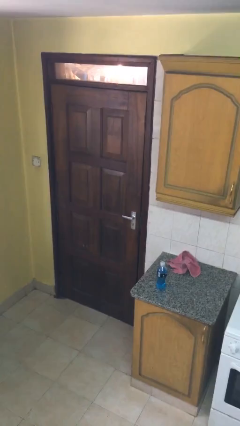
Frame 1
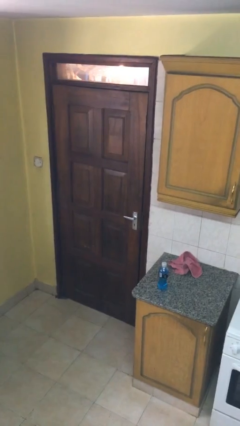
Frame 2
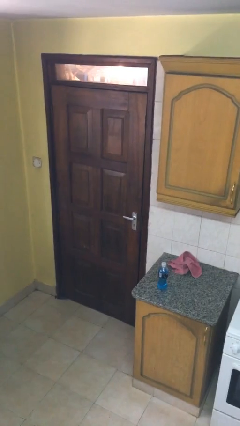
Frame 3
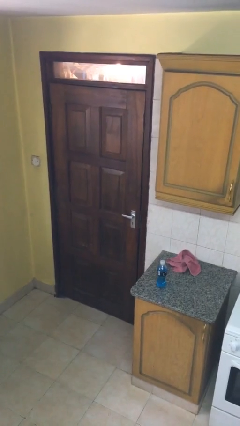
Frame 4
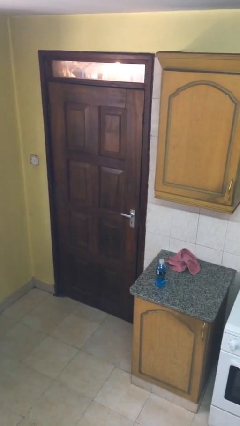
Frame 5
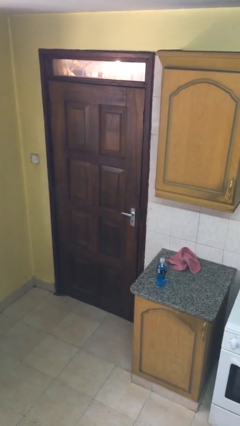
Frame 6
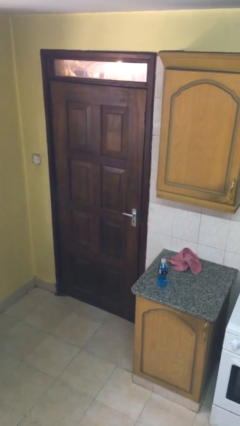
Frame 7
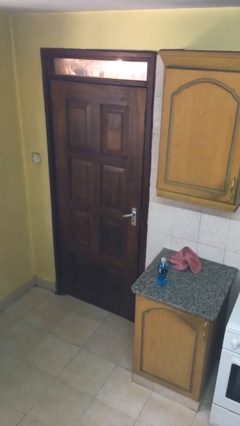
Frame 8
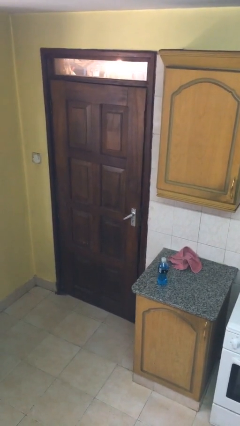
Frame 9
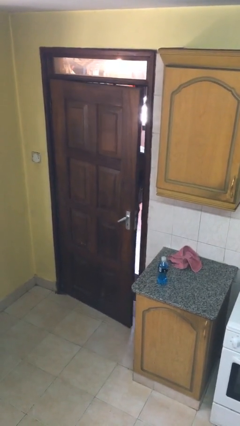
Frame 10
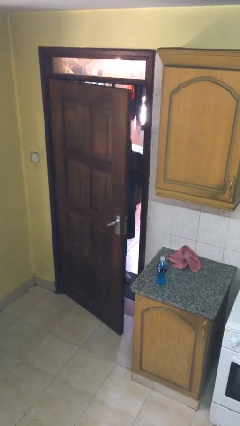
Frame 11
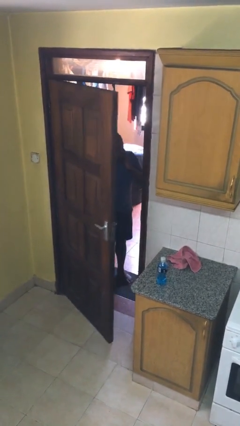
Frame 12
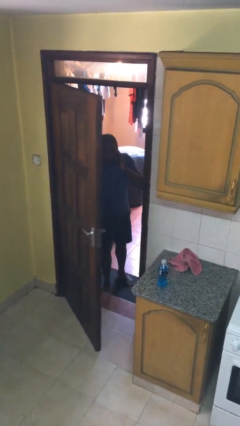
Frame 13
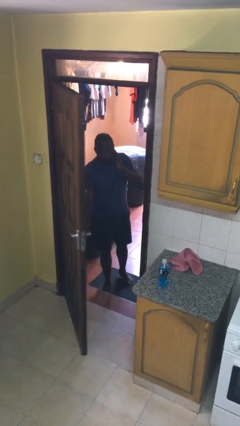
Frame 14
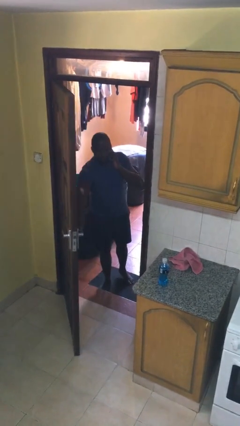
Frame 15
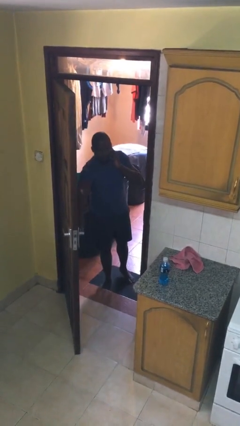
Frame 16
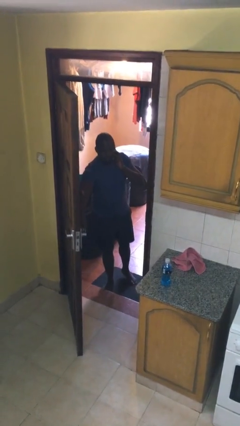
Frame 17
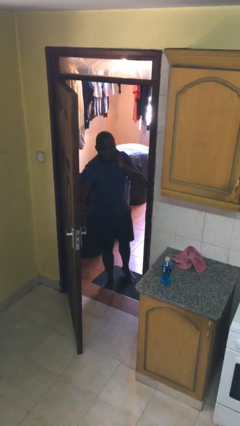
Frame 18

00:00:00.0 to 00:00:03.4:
person opens facility door

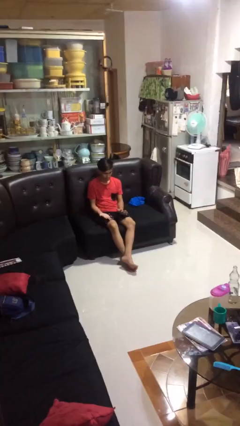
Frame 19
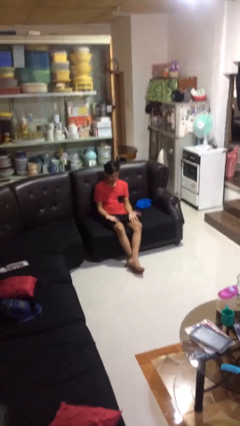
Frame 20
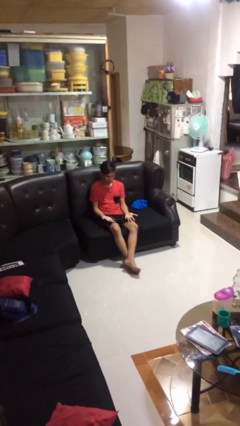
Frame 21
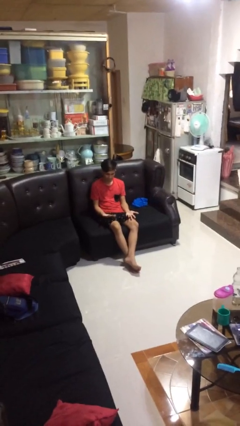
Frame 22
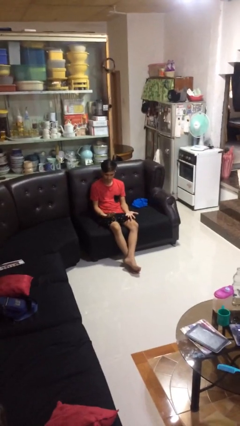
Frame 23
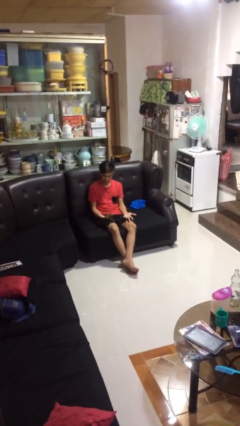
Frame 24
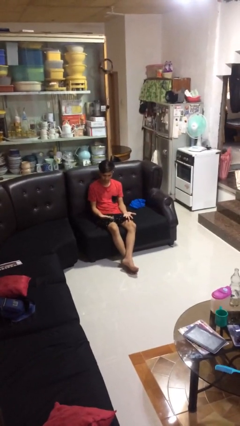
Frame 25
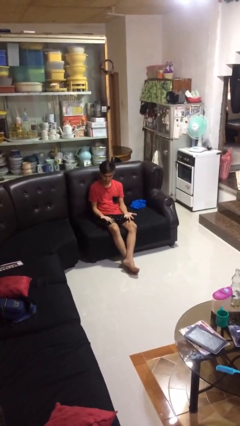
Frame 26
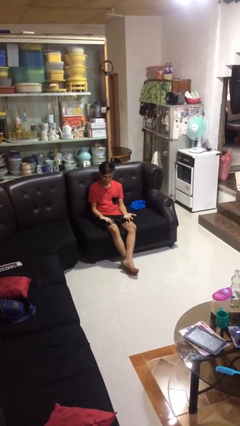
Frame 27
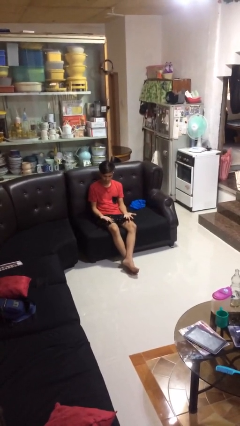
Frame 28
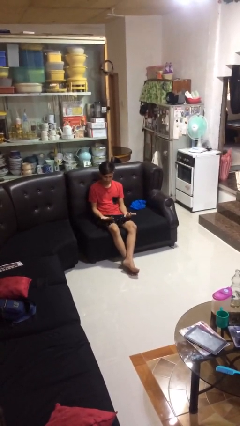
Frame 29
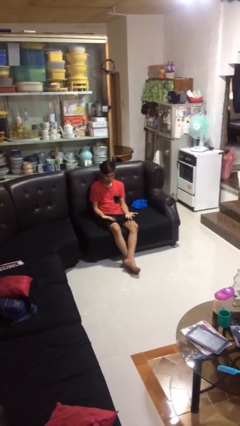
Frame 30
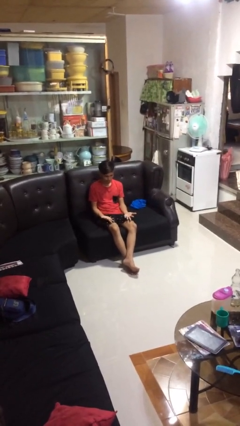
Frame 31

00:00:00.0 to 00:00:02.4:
person looks at hands in lap

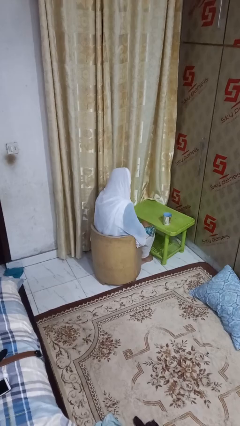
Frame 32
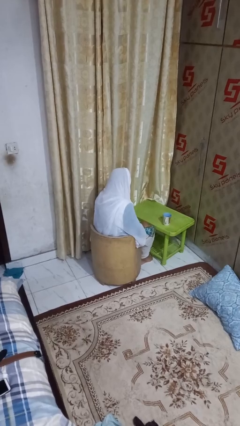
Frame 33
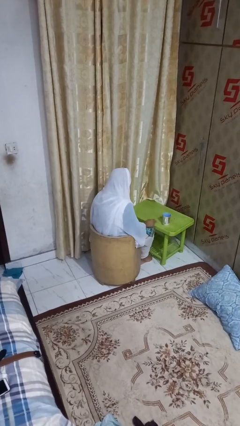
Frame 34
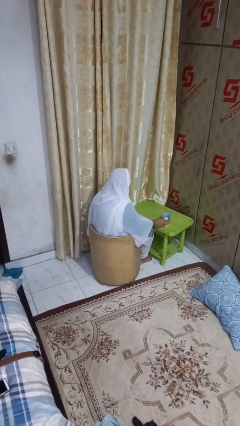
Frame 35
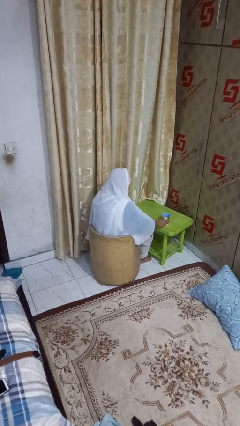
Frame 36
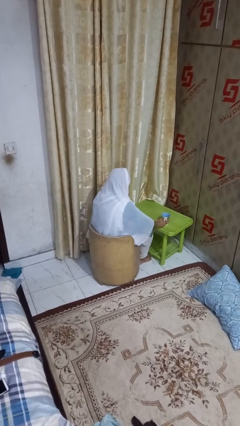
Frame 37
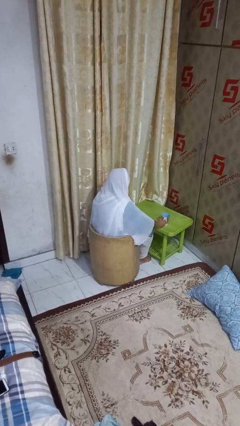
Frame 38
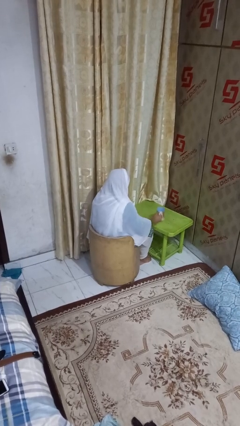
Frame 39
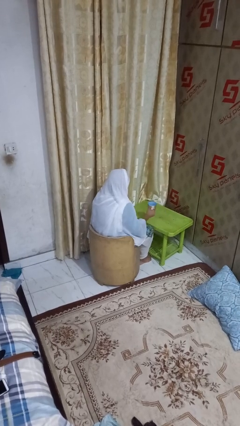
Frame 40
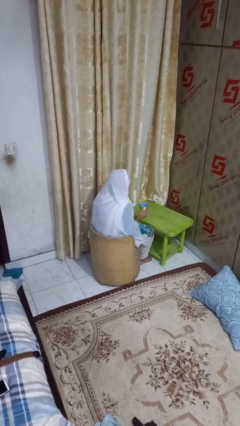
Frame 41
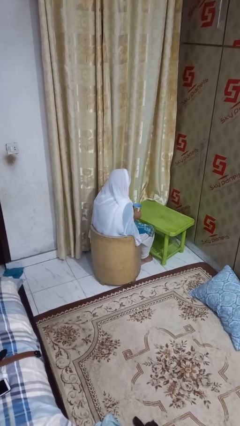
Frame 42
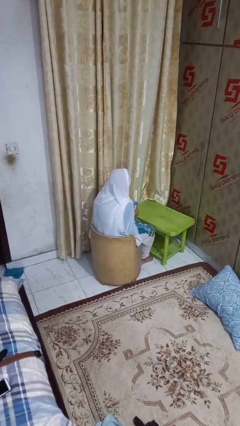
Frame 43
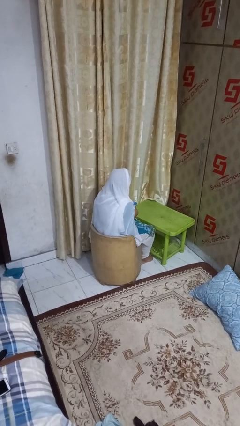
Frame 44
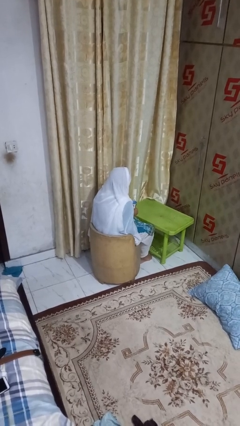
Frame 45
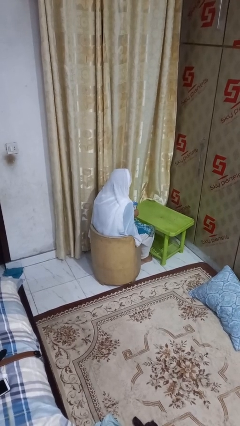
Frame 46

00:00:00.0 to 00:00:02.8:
person picks up object from table

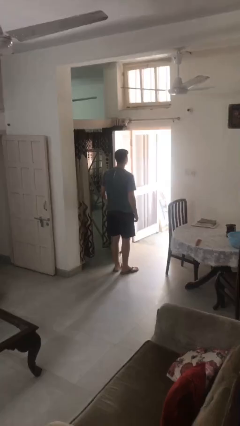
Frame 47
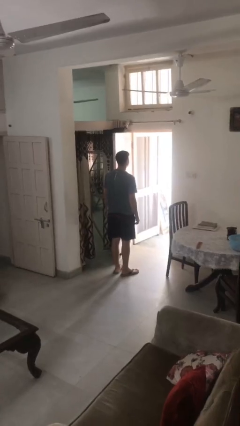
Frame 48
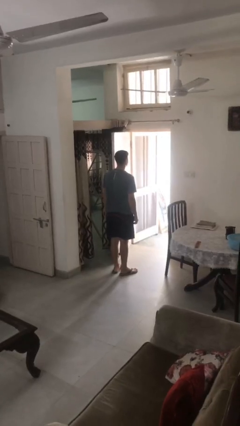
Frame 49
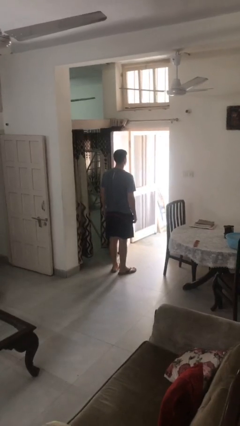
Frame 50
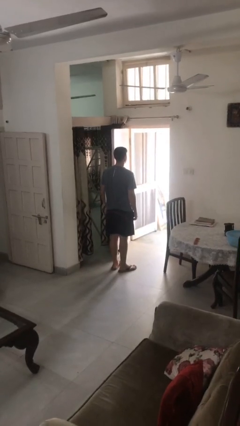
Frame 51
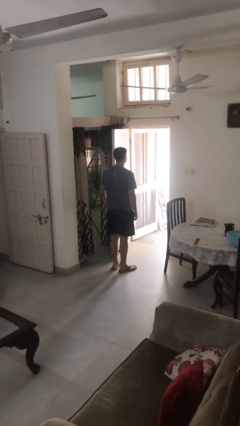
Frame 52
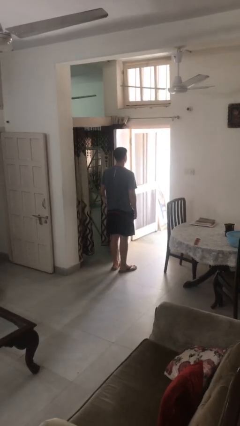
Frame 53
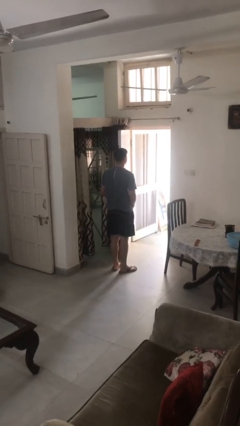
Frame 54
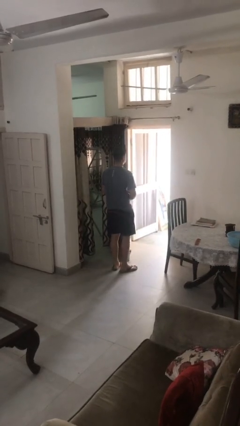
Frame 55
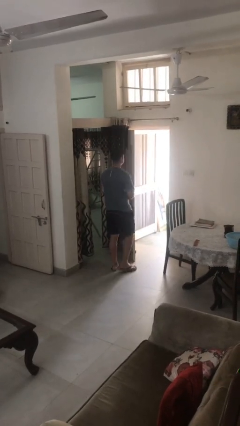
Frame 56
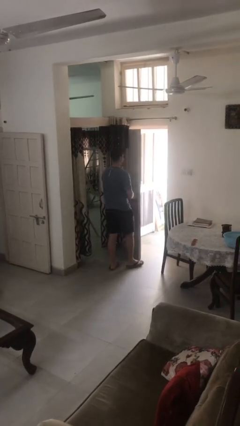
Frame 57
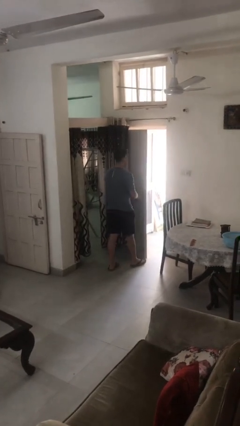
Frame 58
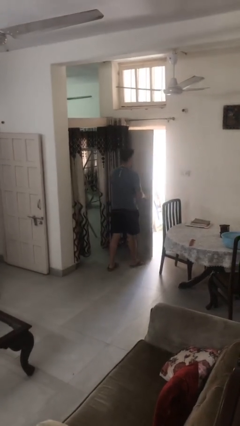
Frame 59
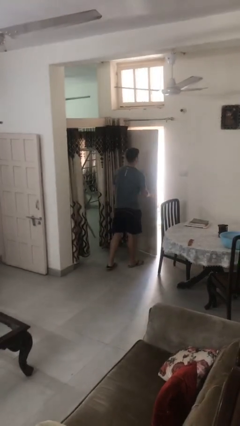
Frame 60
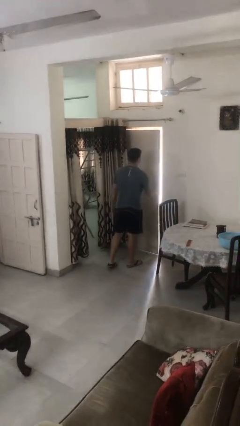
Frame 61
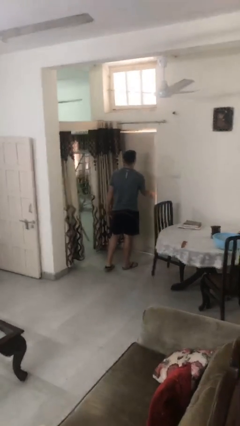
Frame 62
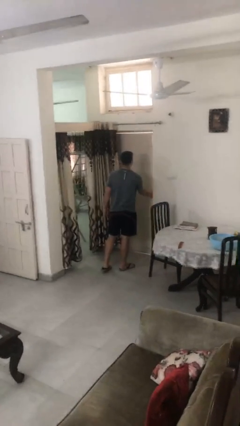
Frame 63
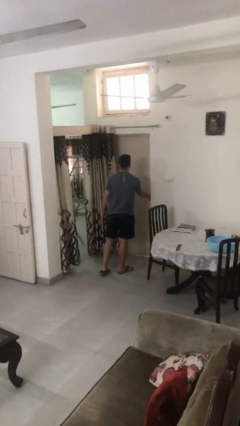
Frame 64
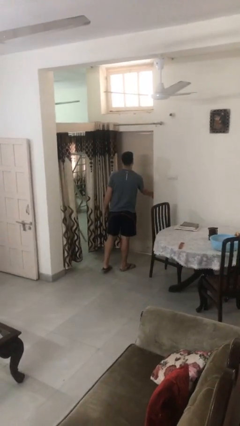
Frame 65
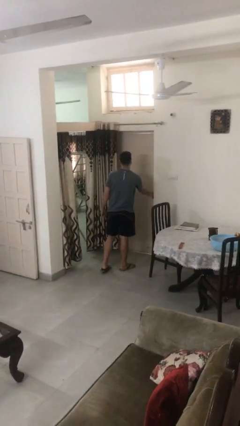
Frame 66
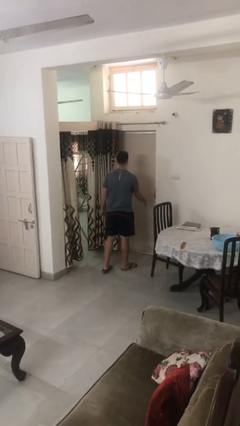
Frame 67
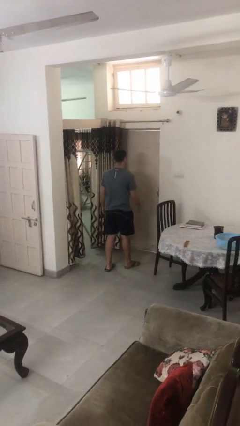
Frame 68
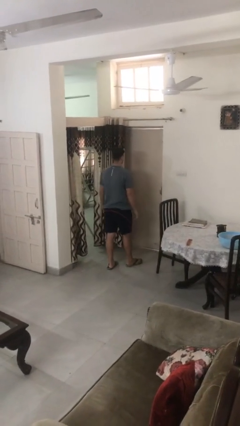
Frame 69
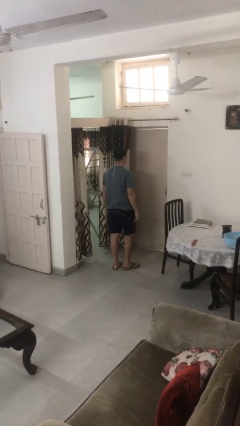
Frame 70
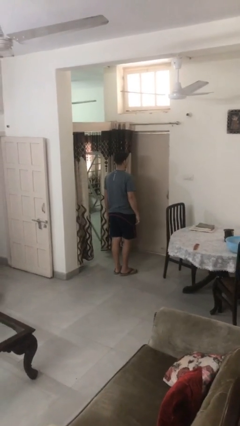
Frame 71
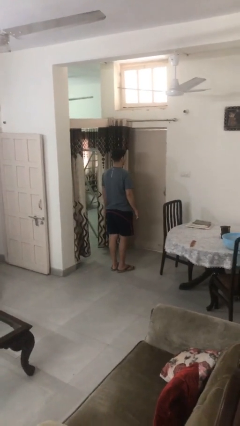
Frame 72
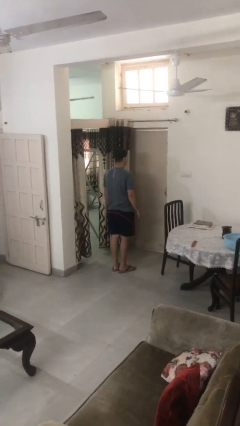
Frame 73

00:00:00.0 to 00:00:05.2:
person closes facility door

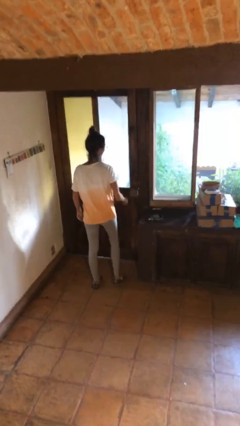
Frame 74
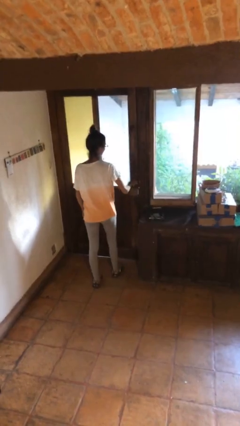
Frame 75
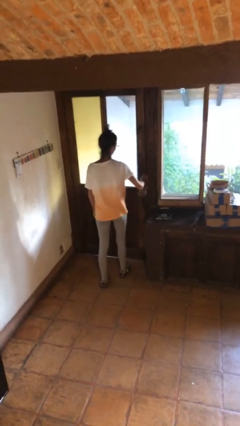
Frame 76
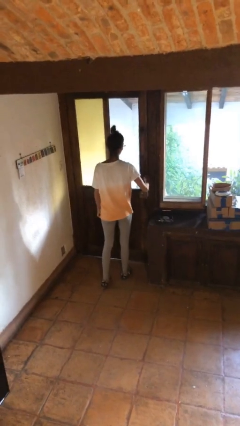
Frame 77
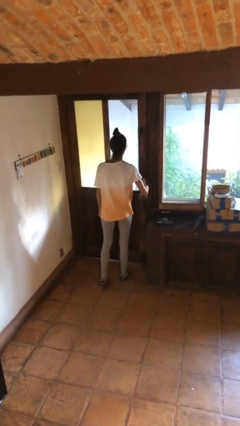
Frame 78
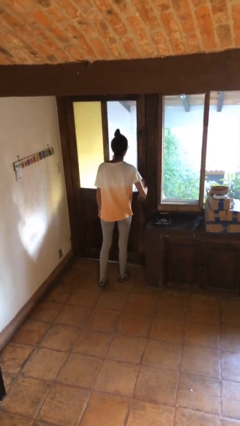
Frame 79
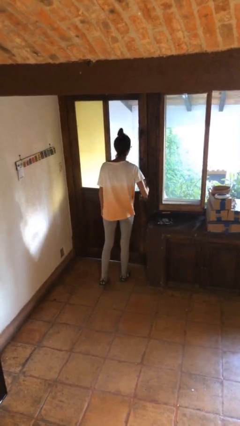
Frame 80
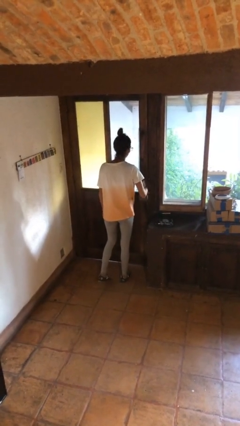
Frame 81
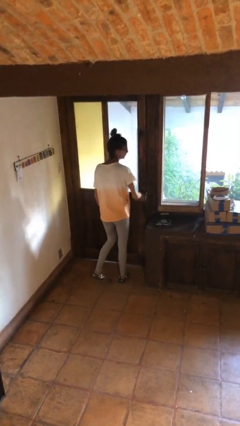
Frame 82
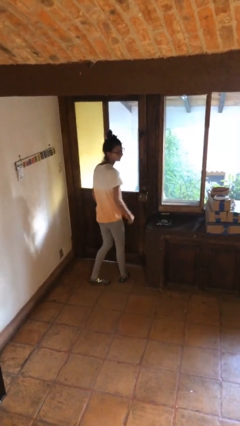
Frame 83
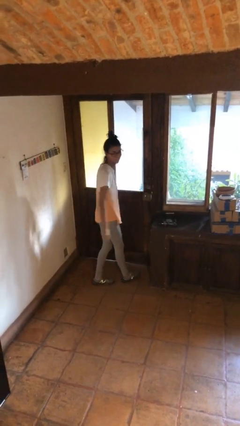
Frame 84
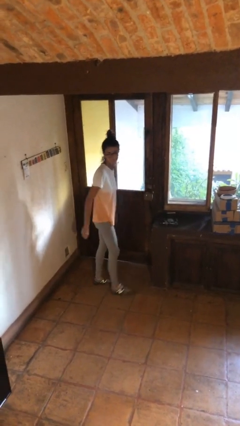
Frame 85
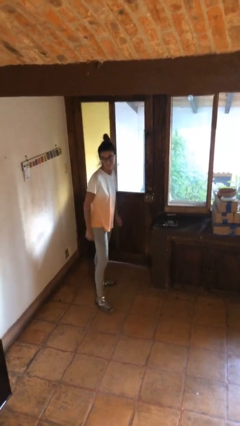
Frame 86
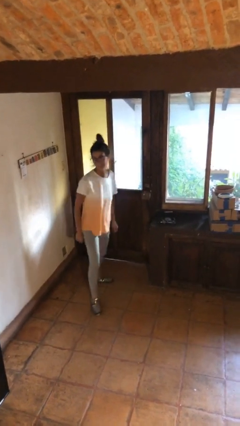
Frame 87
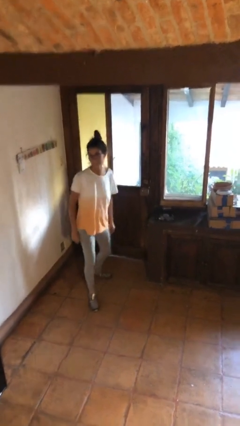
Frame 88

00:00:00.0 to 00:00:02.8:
person locks door with keys

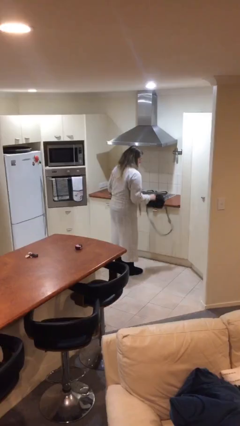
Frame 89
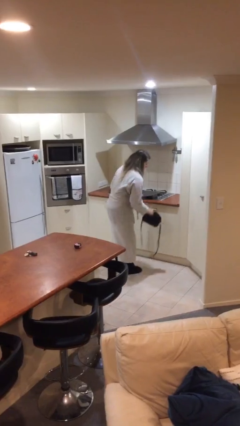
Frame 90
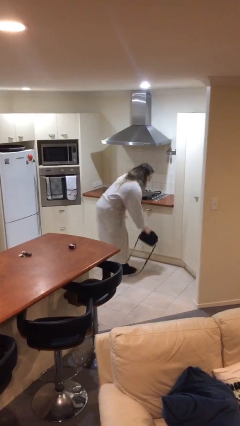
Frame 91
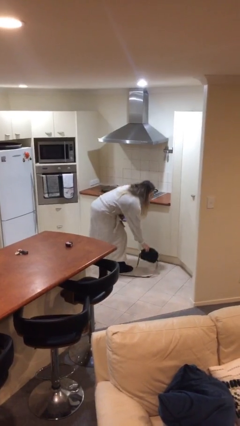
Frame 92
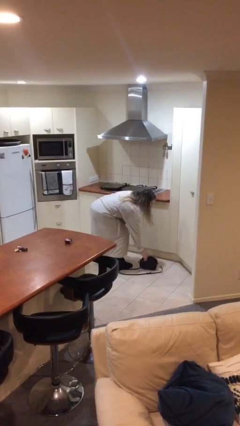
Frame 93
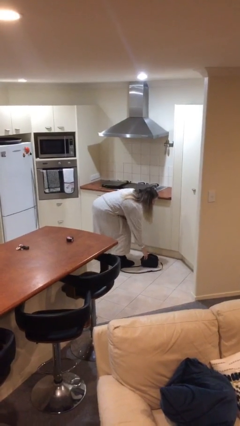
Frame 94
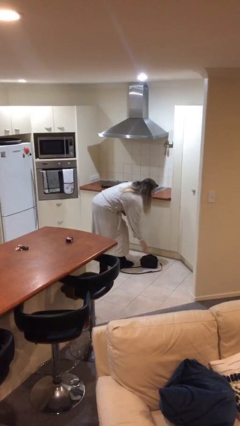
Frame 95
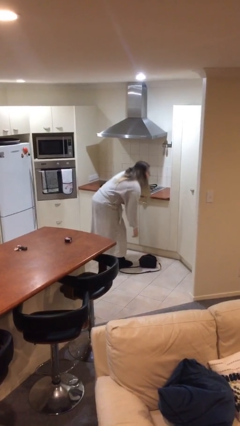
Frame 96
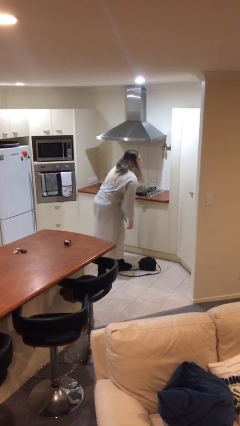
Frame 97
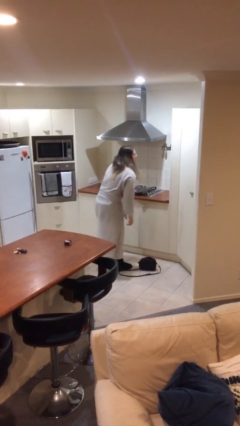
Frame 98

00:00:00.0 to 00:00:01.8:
person puts down object on floor
